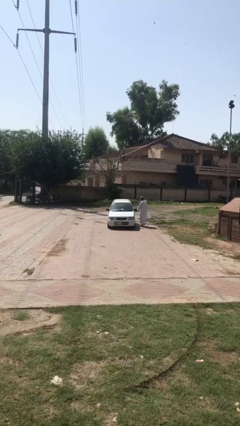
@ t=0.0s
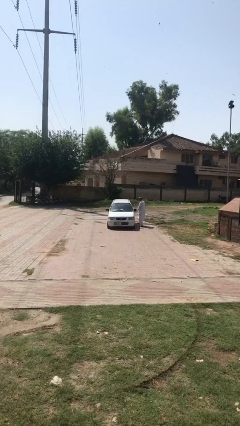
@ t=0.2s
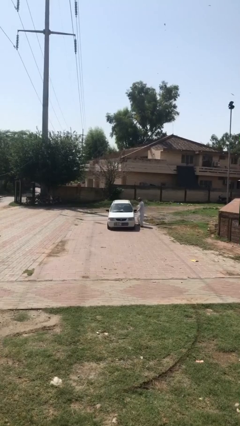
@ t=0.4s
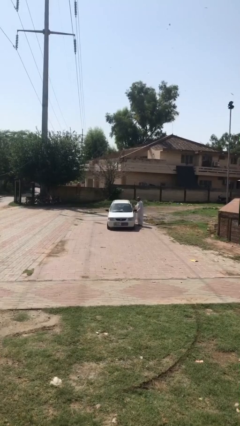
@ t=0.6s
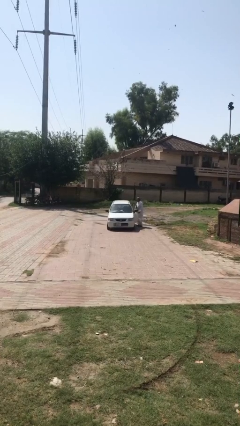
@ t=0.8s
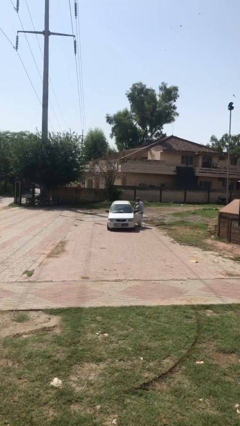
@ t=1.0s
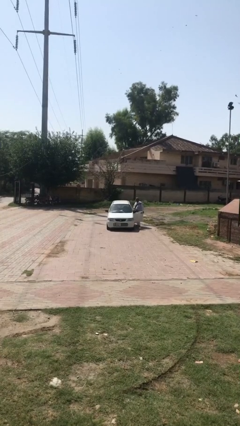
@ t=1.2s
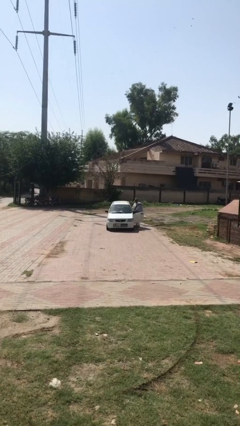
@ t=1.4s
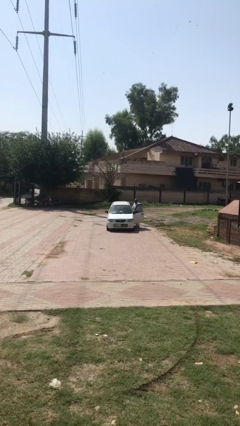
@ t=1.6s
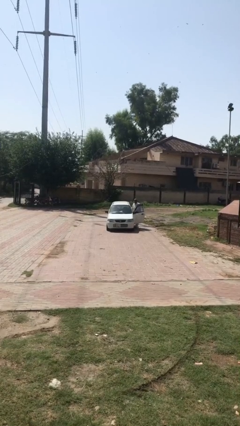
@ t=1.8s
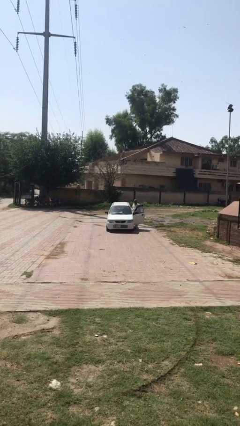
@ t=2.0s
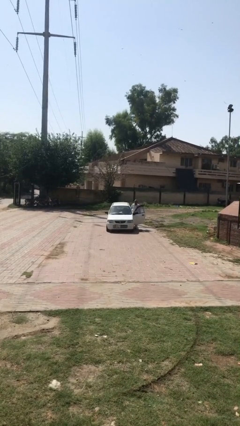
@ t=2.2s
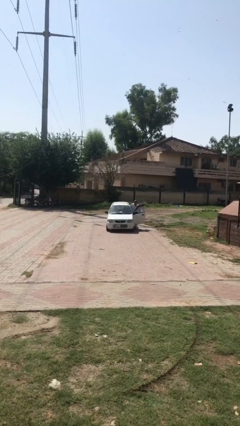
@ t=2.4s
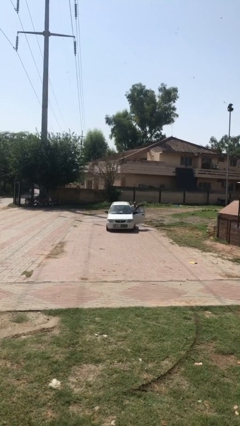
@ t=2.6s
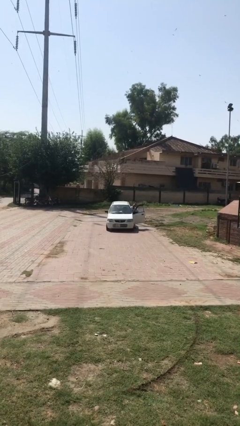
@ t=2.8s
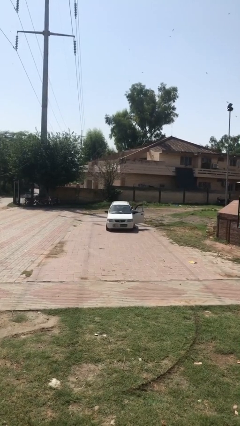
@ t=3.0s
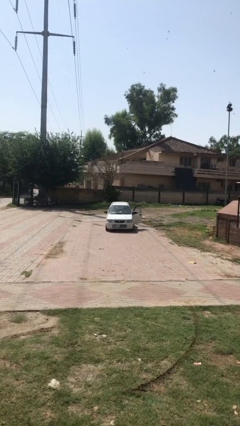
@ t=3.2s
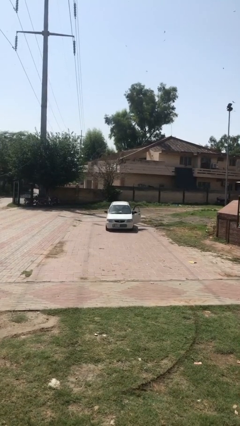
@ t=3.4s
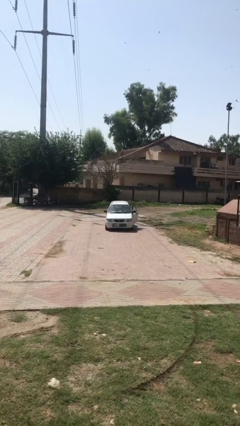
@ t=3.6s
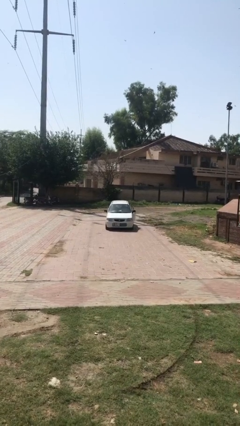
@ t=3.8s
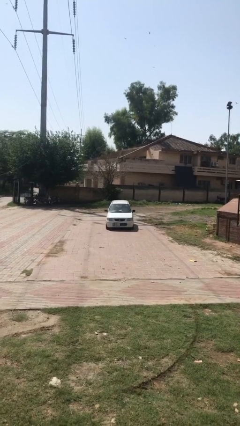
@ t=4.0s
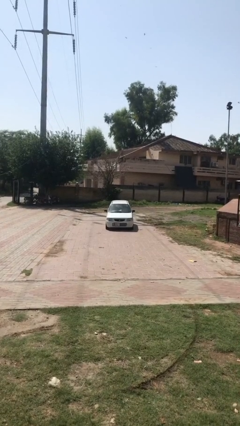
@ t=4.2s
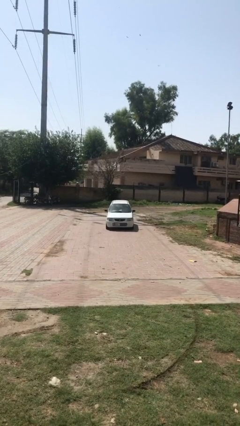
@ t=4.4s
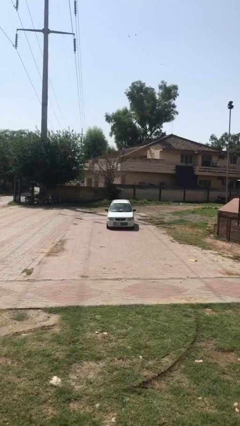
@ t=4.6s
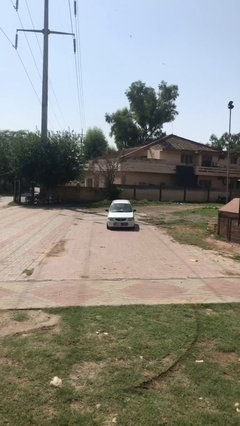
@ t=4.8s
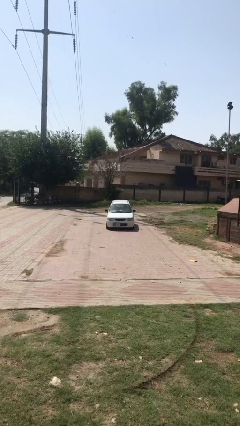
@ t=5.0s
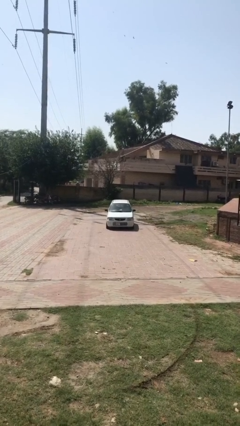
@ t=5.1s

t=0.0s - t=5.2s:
car picks up person

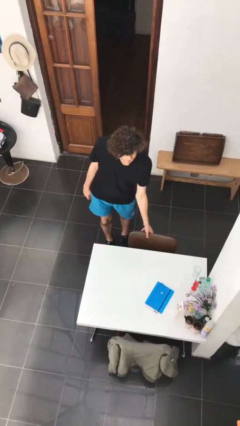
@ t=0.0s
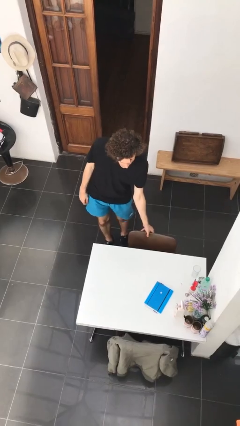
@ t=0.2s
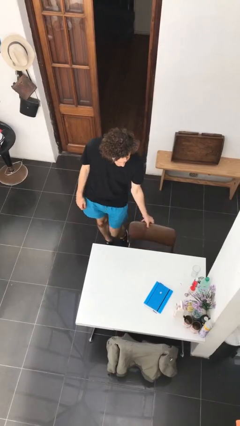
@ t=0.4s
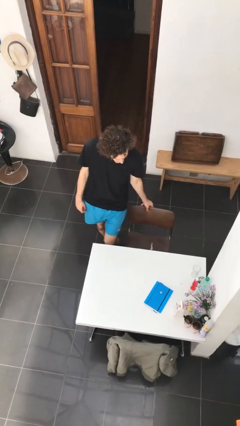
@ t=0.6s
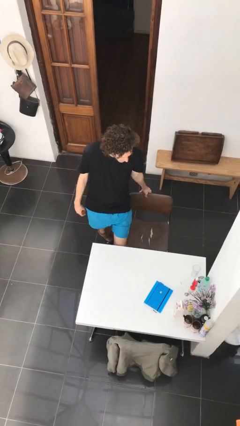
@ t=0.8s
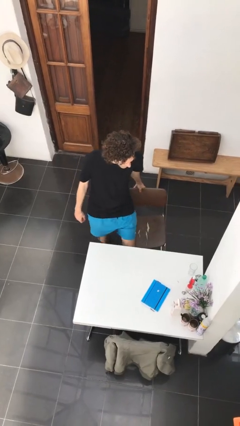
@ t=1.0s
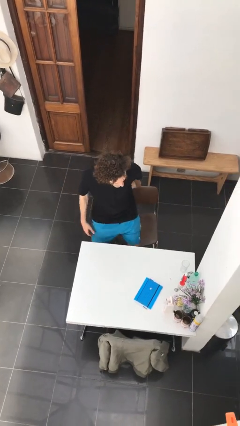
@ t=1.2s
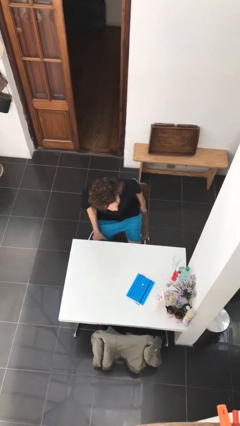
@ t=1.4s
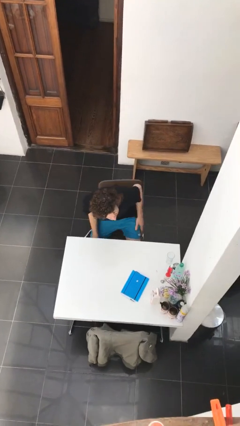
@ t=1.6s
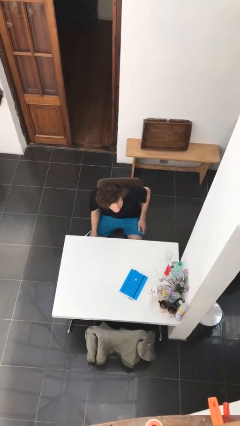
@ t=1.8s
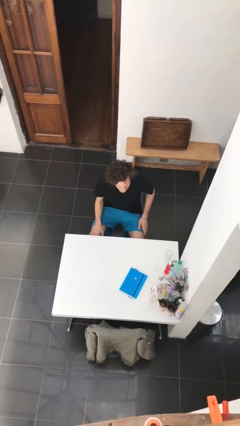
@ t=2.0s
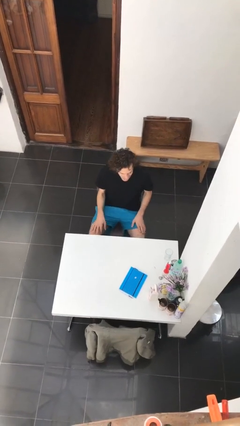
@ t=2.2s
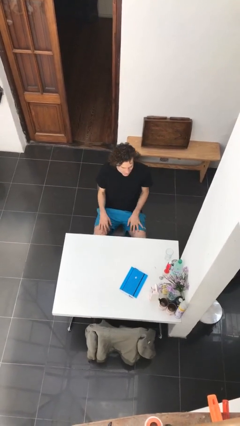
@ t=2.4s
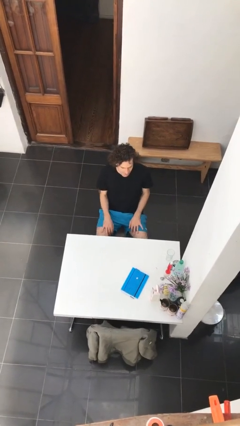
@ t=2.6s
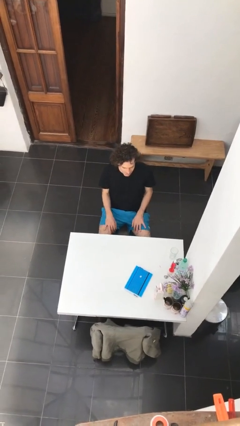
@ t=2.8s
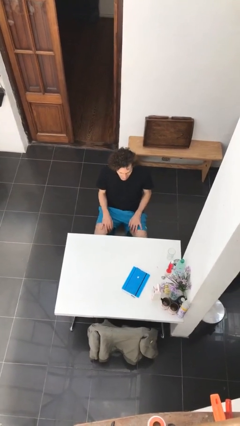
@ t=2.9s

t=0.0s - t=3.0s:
person sits down

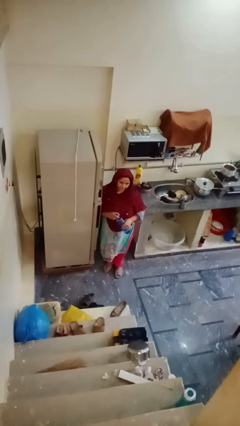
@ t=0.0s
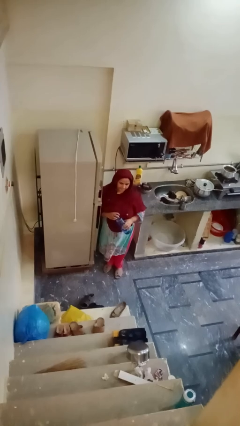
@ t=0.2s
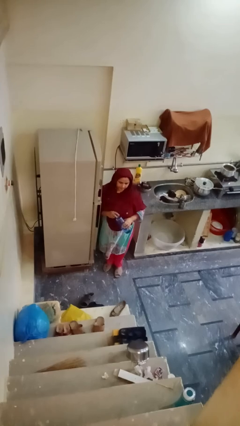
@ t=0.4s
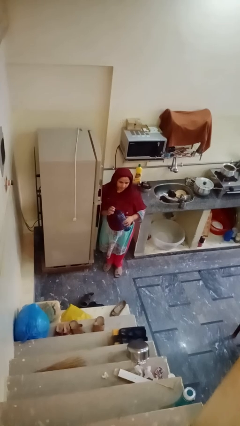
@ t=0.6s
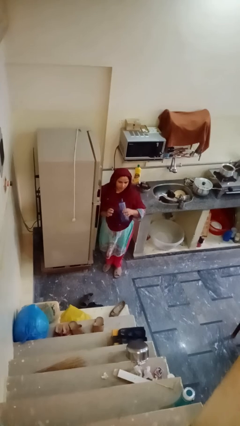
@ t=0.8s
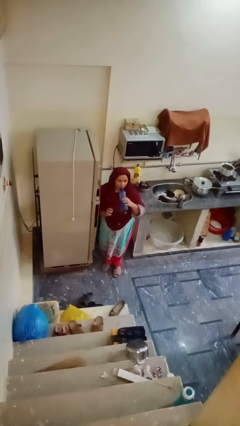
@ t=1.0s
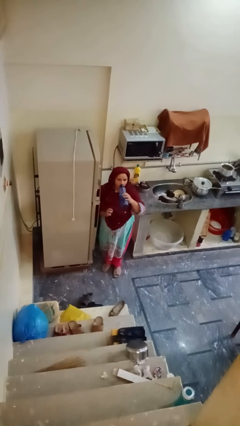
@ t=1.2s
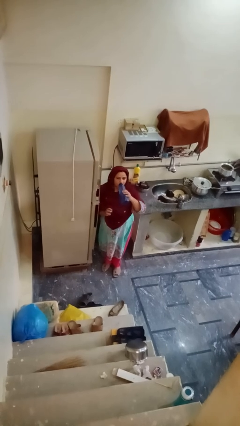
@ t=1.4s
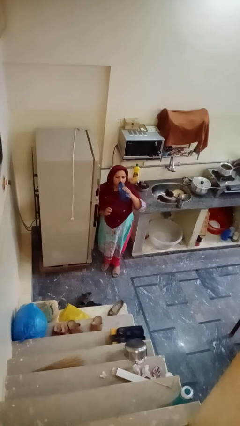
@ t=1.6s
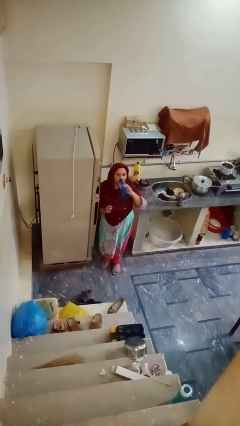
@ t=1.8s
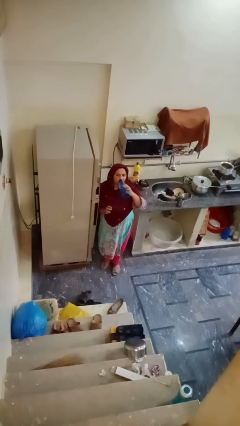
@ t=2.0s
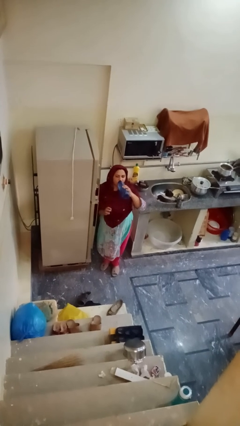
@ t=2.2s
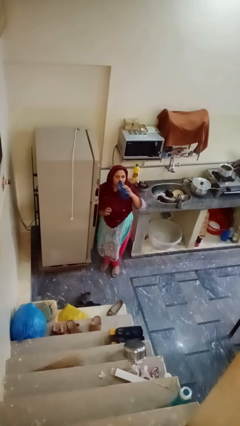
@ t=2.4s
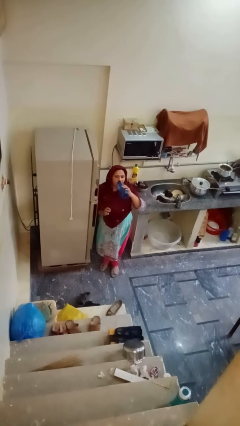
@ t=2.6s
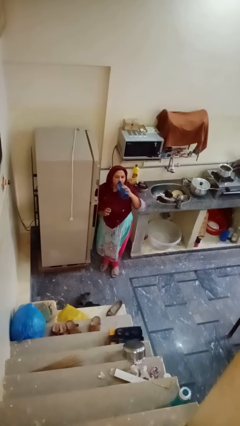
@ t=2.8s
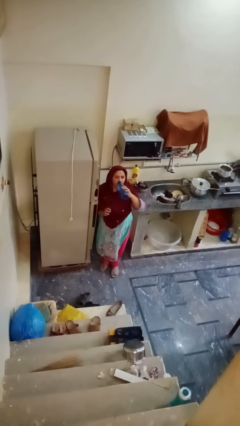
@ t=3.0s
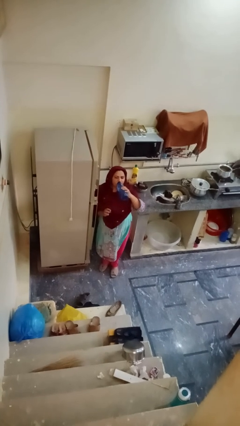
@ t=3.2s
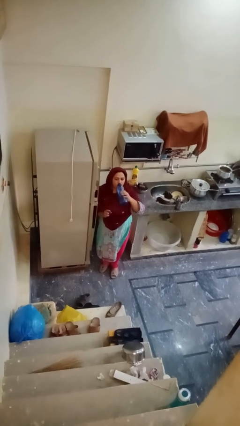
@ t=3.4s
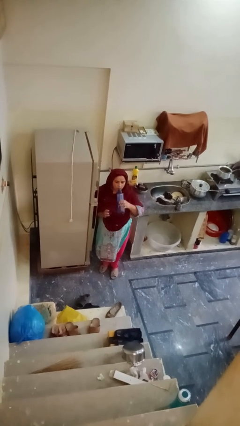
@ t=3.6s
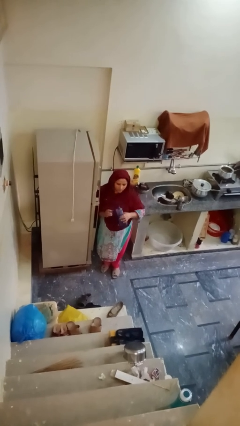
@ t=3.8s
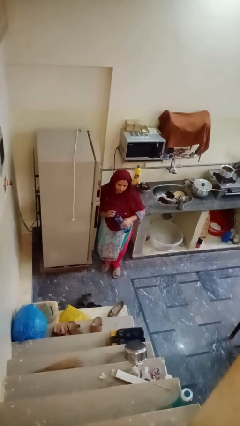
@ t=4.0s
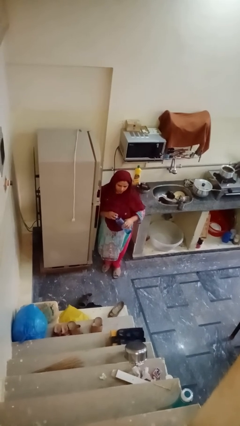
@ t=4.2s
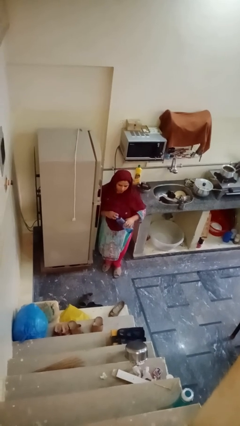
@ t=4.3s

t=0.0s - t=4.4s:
person drinks from bottle

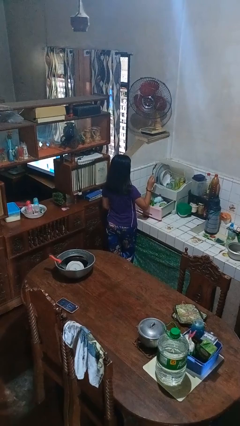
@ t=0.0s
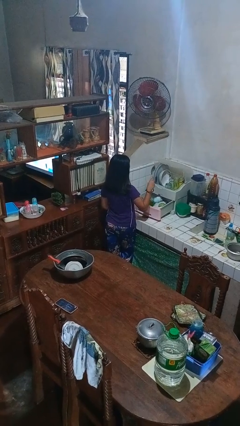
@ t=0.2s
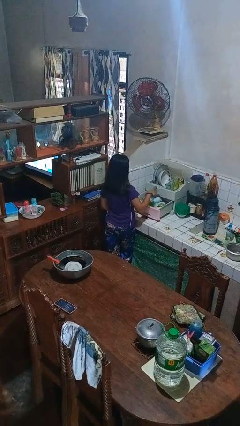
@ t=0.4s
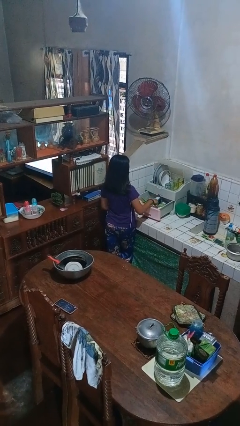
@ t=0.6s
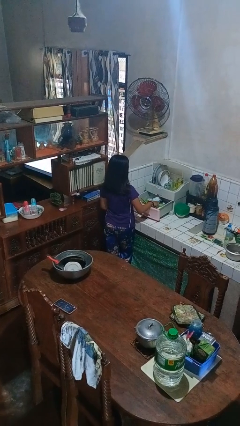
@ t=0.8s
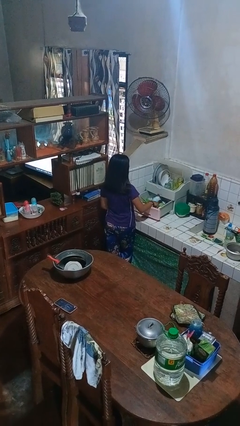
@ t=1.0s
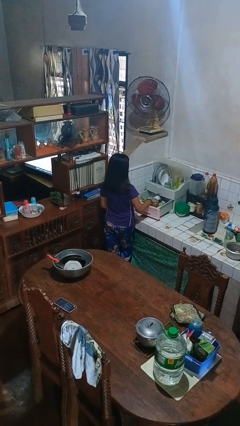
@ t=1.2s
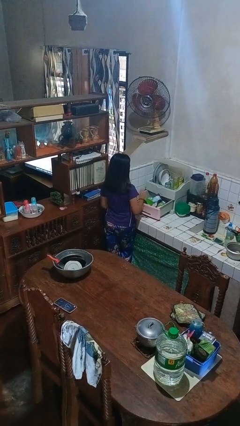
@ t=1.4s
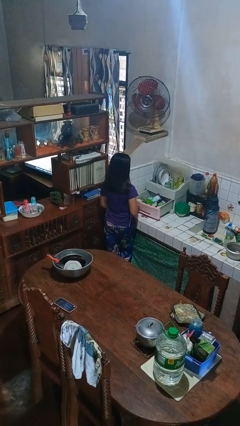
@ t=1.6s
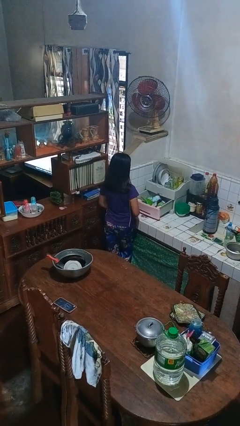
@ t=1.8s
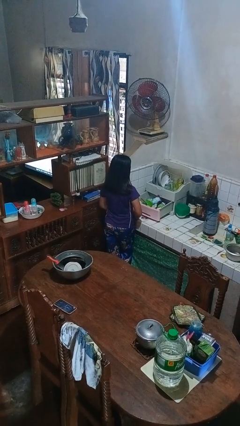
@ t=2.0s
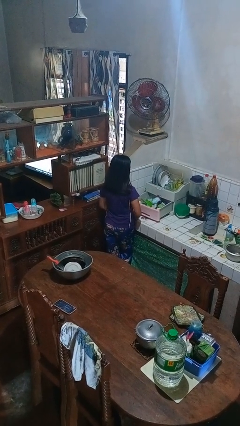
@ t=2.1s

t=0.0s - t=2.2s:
person puts object into kitchen drawer

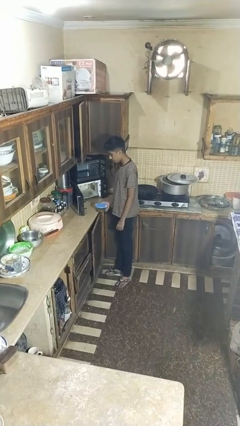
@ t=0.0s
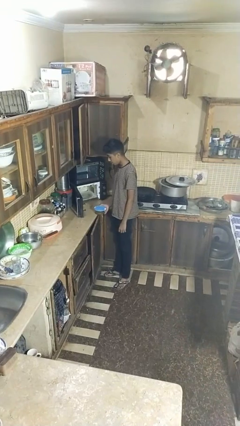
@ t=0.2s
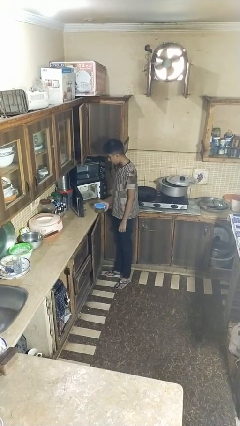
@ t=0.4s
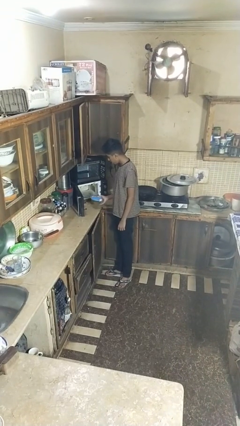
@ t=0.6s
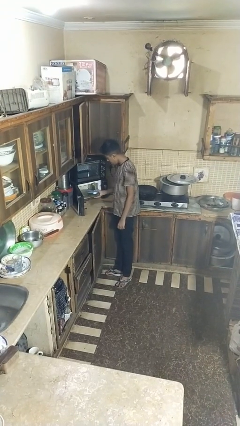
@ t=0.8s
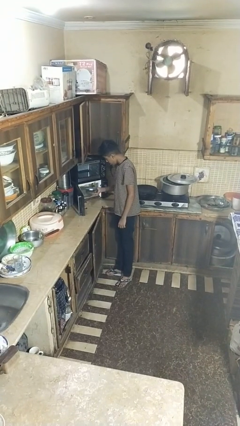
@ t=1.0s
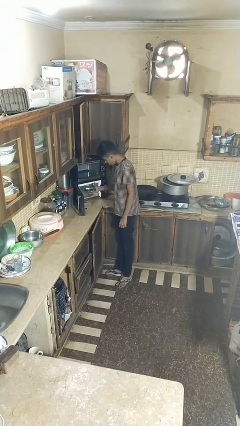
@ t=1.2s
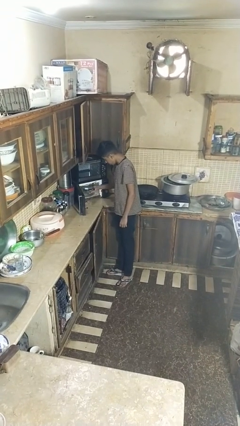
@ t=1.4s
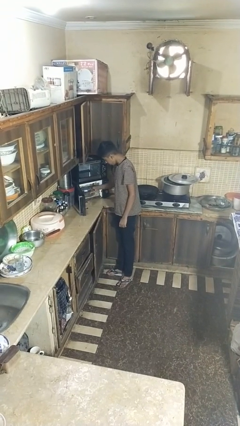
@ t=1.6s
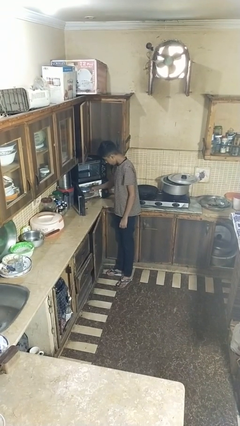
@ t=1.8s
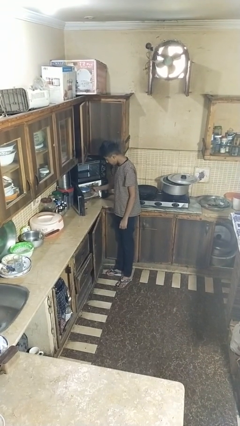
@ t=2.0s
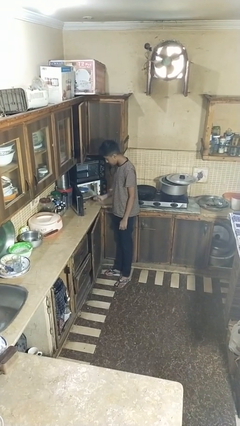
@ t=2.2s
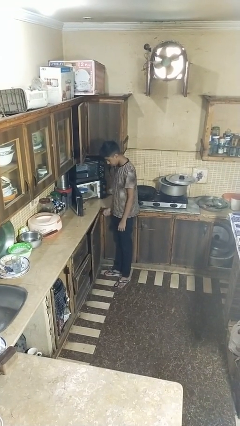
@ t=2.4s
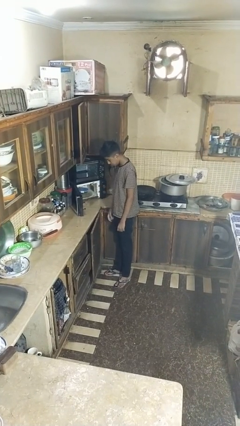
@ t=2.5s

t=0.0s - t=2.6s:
person puts object into microwave

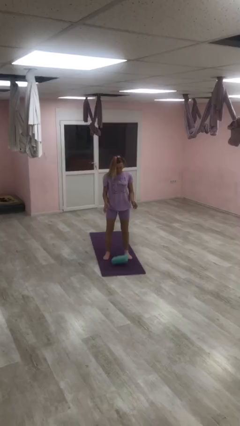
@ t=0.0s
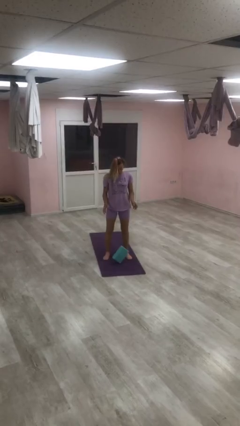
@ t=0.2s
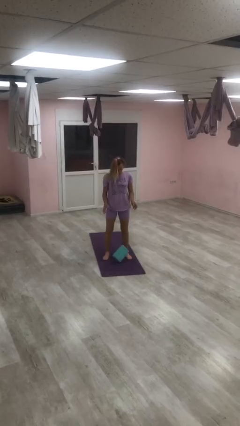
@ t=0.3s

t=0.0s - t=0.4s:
person drops object
